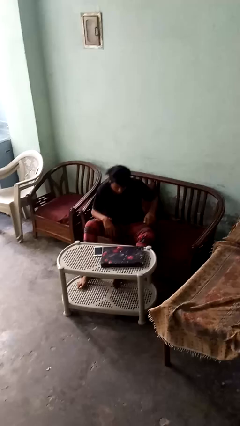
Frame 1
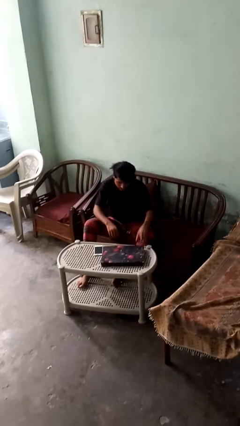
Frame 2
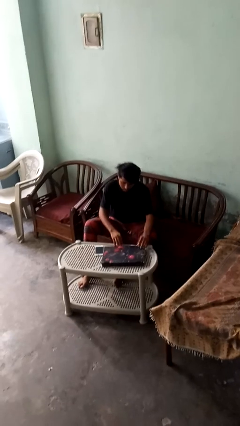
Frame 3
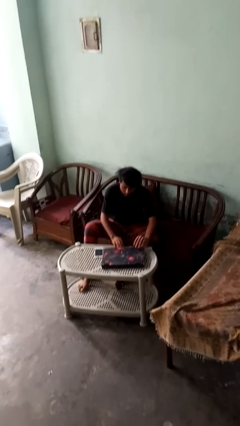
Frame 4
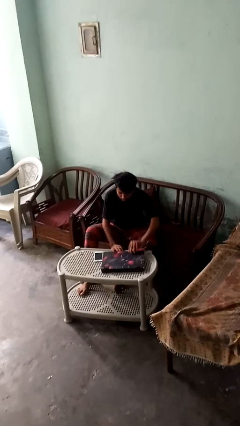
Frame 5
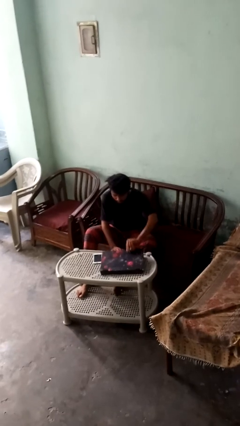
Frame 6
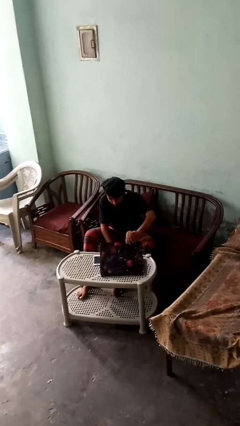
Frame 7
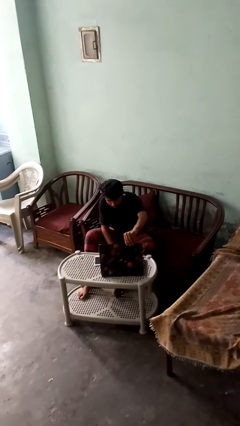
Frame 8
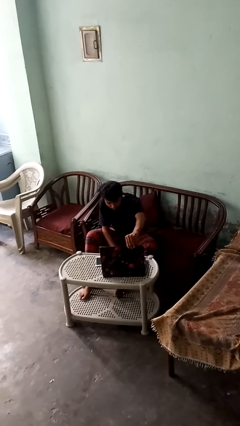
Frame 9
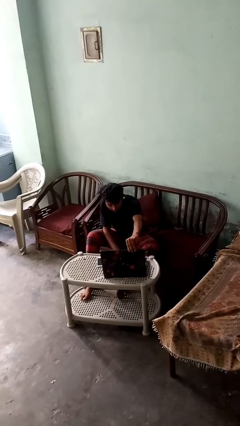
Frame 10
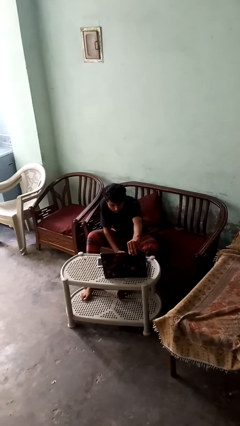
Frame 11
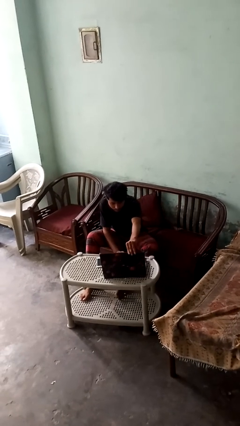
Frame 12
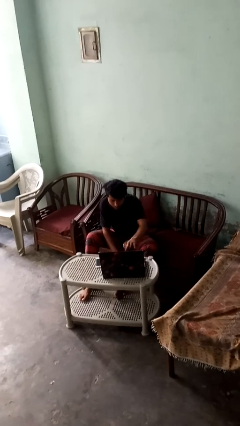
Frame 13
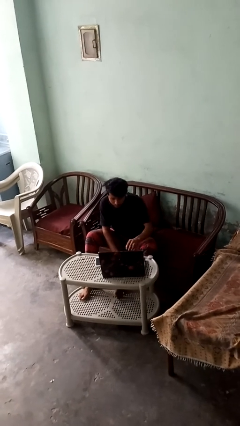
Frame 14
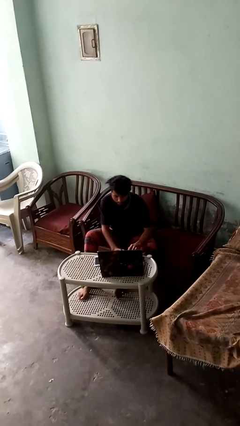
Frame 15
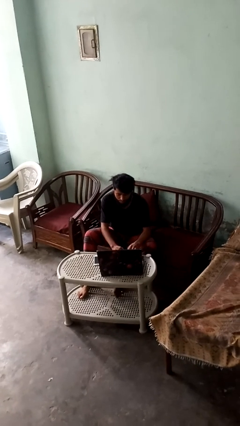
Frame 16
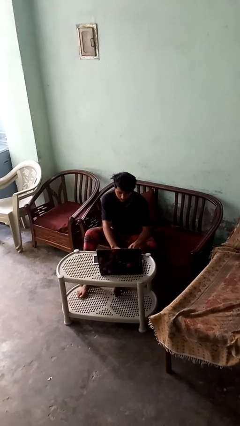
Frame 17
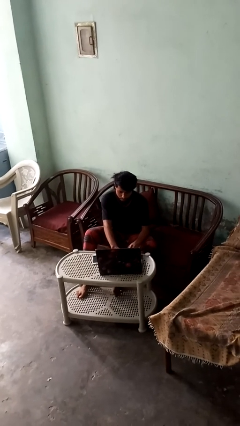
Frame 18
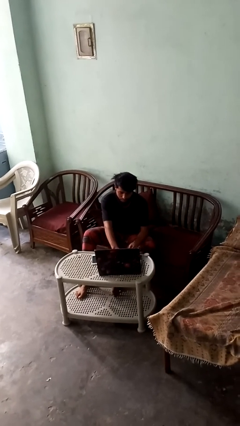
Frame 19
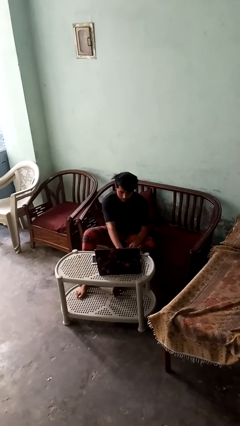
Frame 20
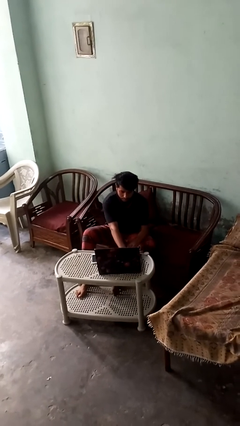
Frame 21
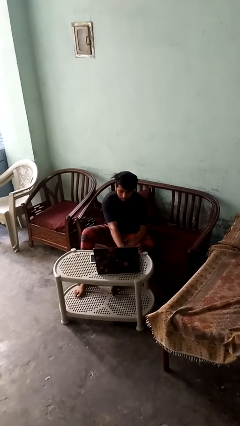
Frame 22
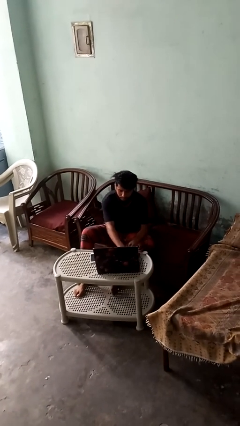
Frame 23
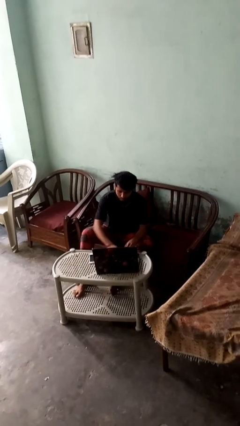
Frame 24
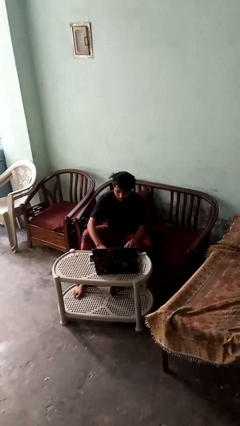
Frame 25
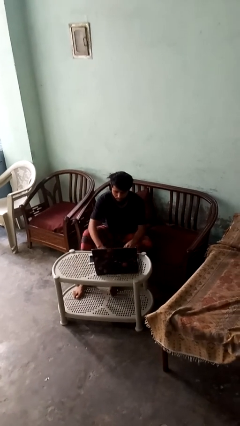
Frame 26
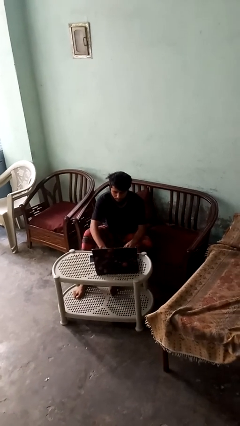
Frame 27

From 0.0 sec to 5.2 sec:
person opens laptop

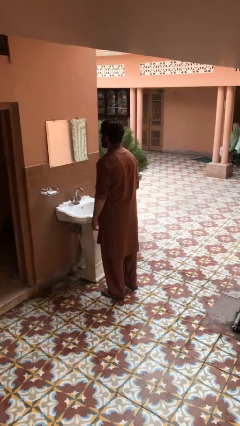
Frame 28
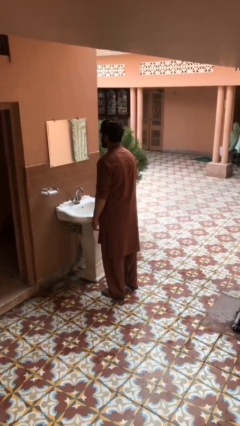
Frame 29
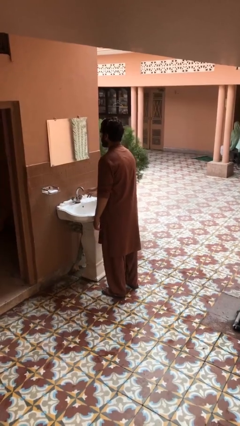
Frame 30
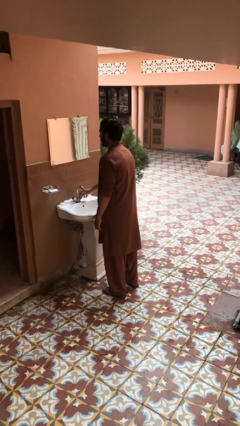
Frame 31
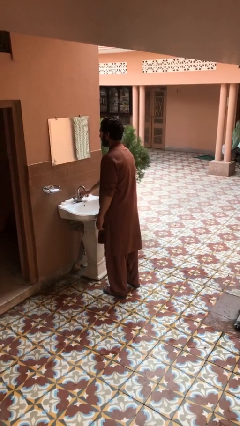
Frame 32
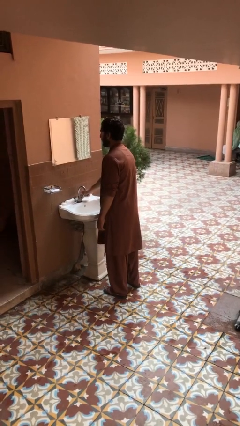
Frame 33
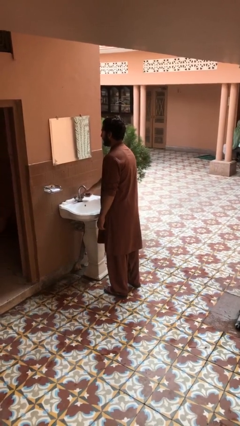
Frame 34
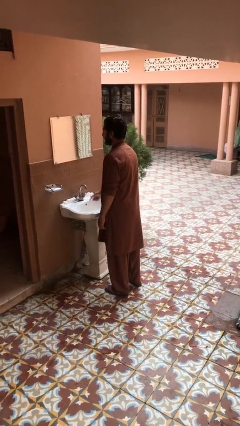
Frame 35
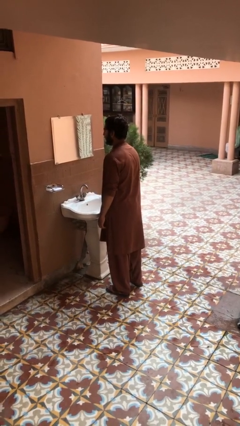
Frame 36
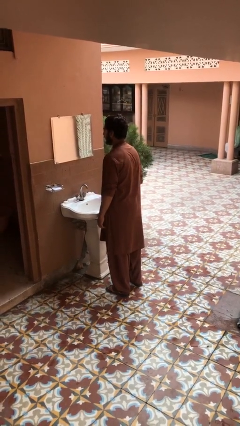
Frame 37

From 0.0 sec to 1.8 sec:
person turns off faucet

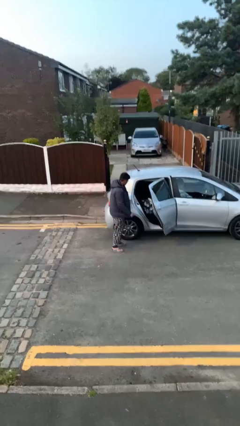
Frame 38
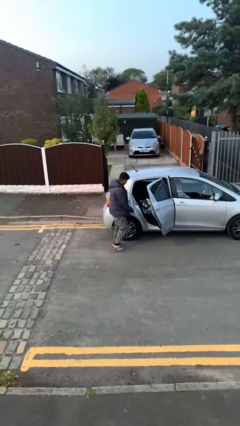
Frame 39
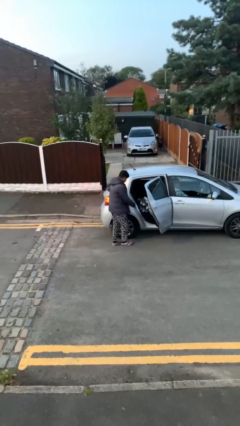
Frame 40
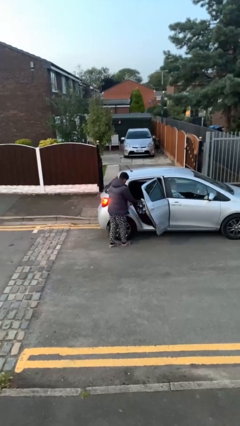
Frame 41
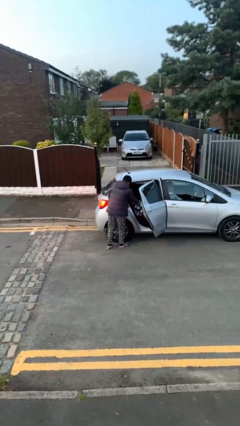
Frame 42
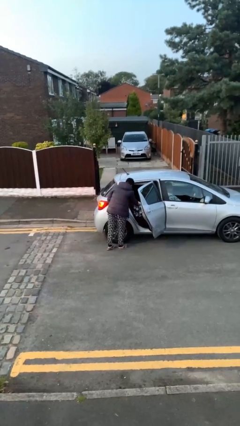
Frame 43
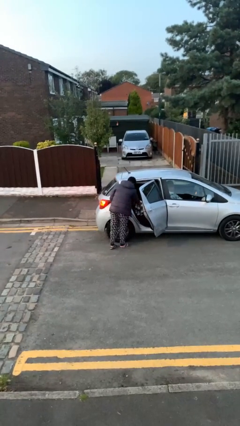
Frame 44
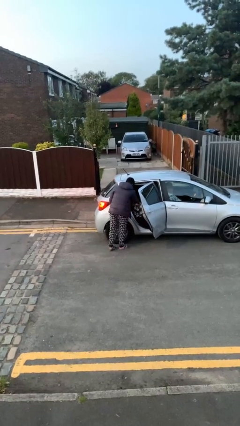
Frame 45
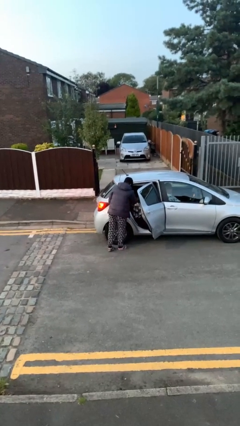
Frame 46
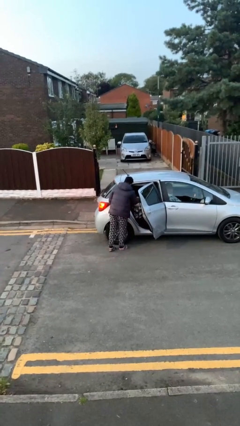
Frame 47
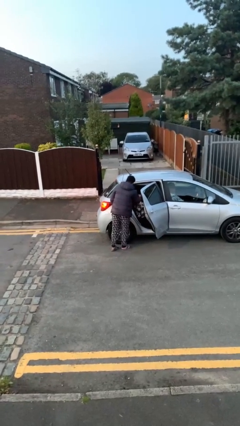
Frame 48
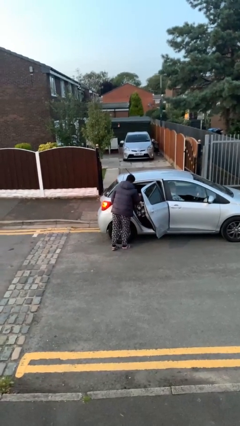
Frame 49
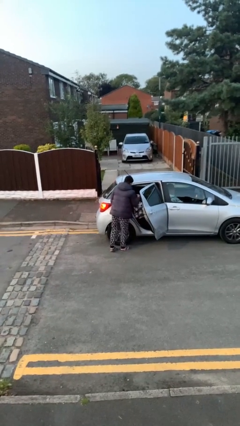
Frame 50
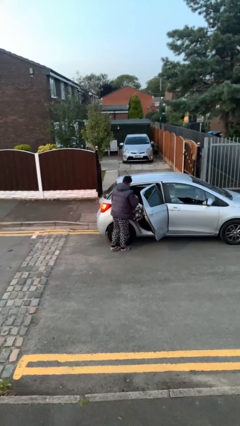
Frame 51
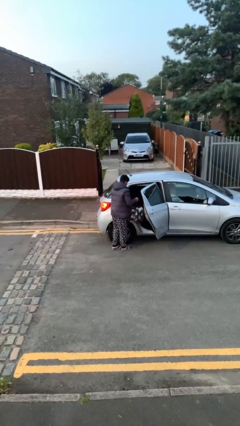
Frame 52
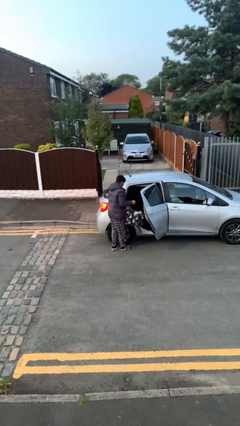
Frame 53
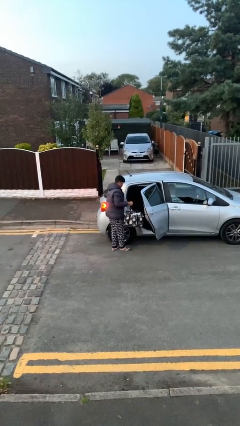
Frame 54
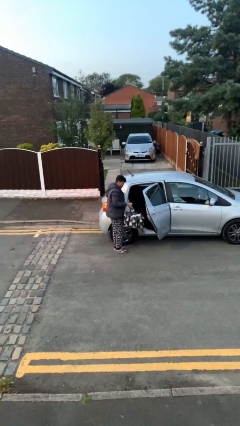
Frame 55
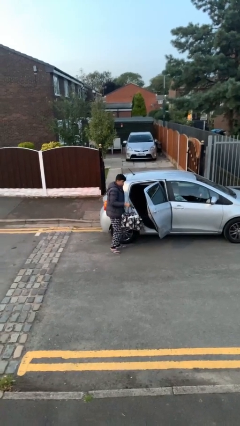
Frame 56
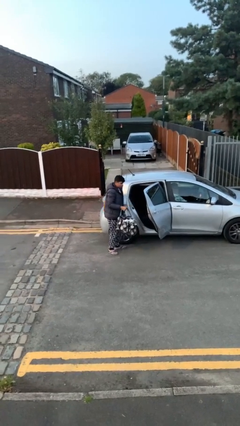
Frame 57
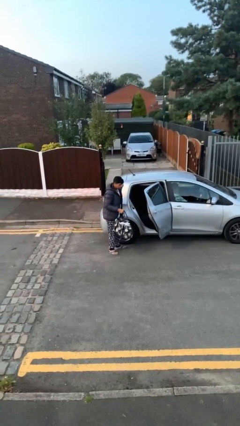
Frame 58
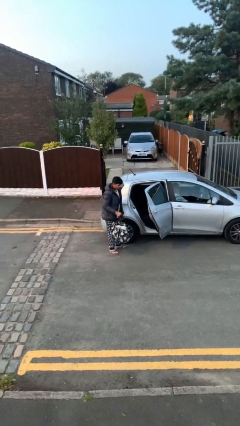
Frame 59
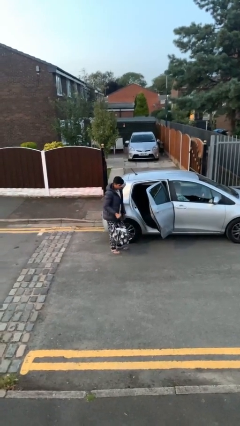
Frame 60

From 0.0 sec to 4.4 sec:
person unloads car

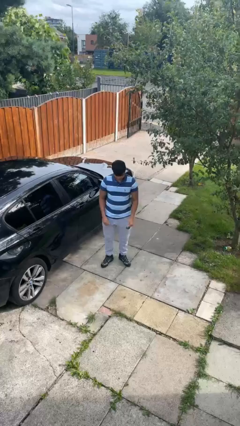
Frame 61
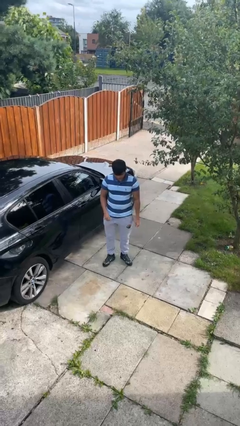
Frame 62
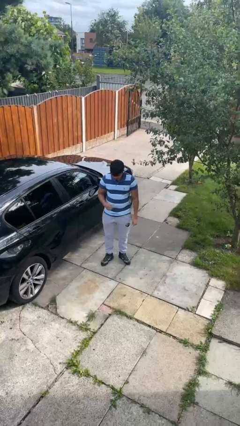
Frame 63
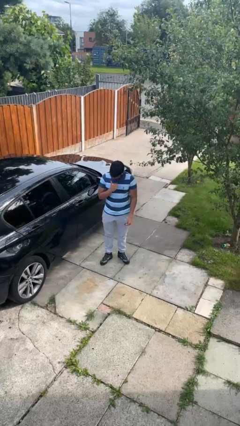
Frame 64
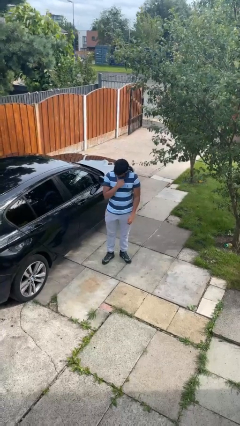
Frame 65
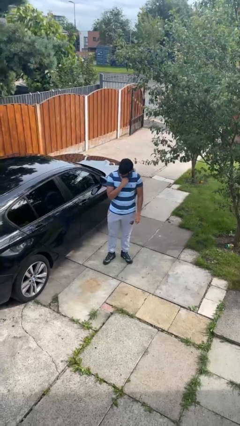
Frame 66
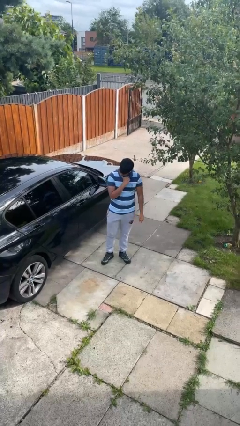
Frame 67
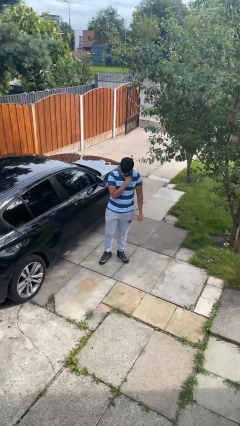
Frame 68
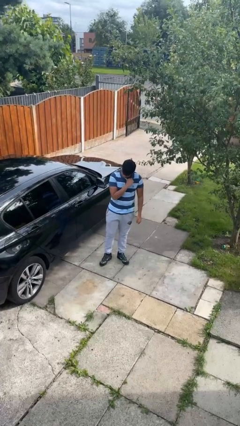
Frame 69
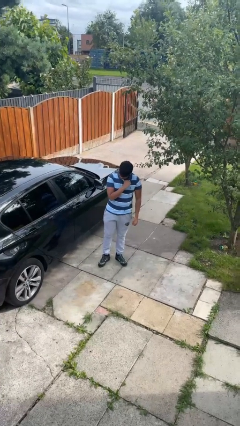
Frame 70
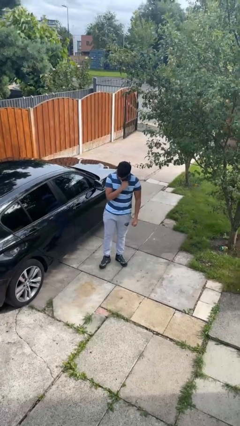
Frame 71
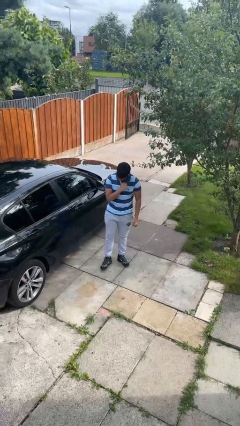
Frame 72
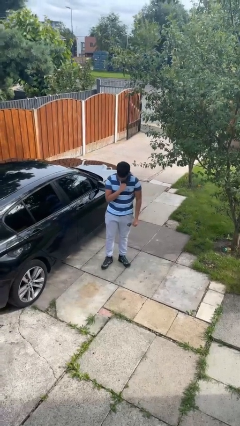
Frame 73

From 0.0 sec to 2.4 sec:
person licks fingers

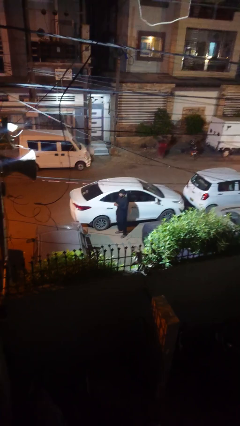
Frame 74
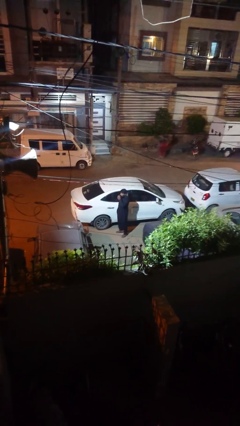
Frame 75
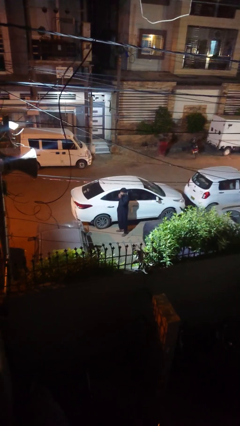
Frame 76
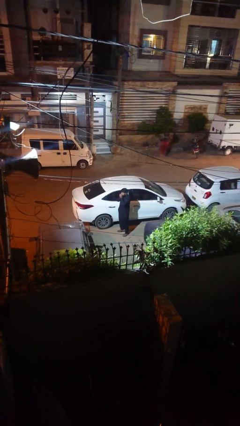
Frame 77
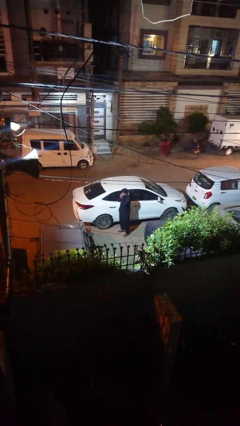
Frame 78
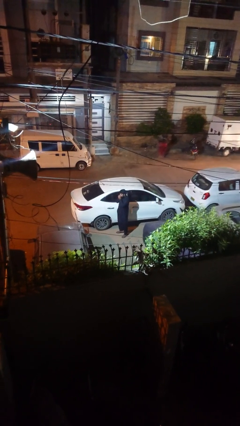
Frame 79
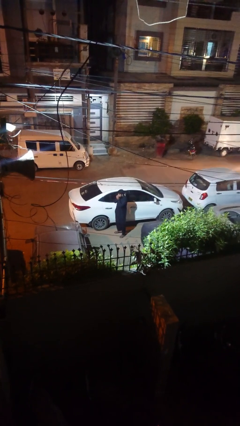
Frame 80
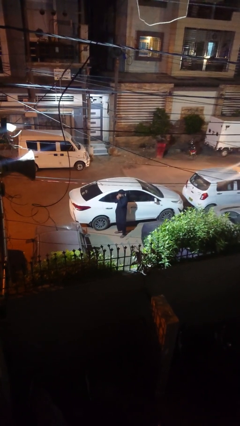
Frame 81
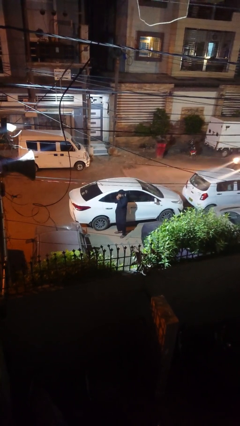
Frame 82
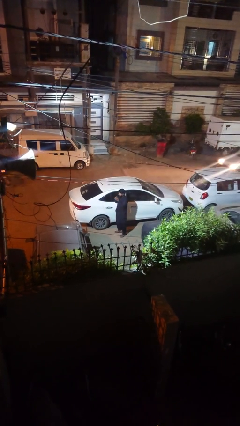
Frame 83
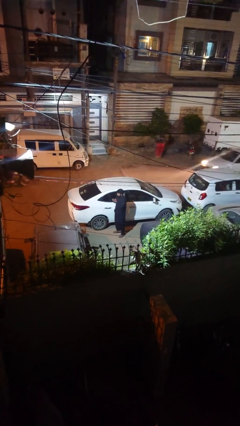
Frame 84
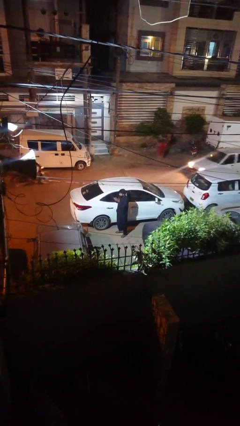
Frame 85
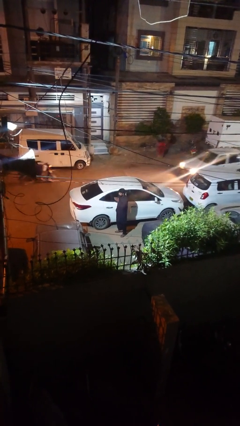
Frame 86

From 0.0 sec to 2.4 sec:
person blows into hands

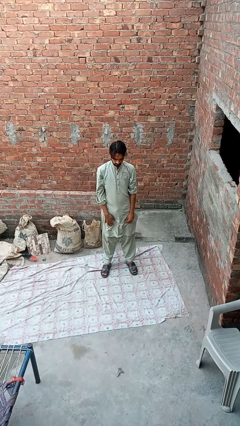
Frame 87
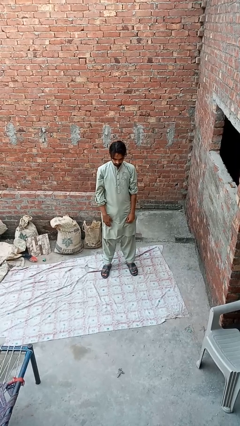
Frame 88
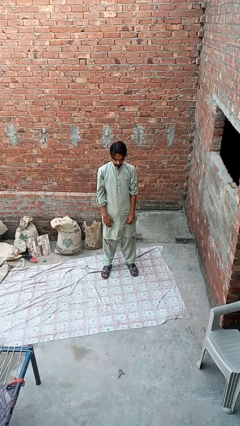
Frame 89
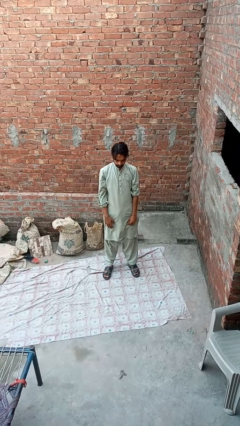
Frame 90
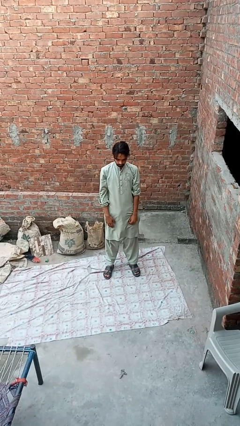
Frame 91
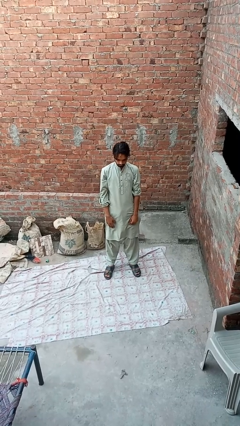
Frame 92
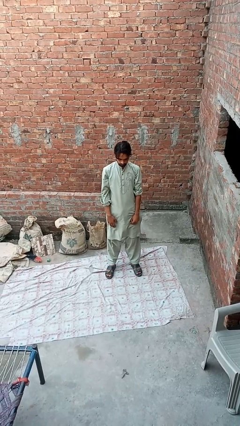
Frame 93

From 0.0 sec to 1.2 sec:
person stands up
